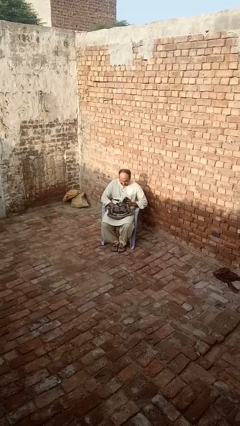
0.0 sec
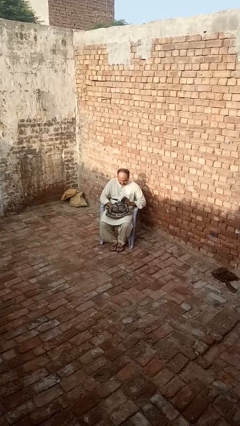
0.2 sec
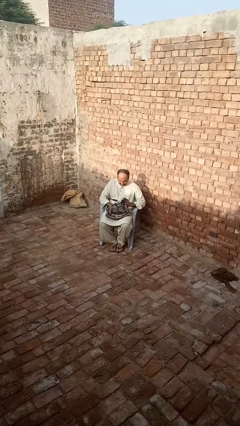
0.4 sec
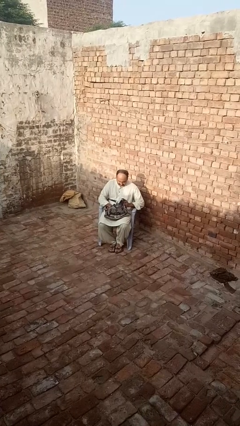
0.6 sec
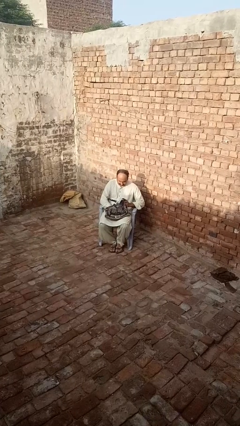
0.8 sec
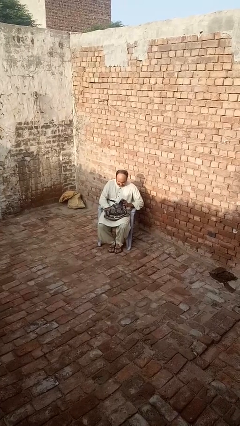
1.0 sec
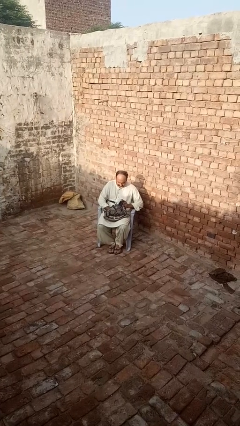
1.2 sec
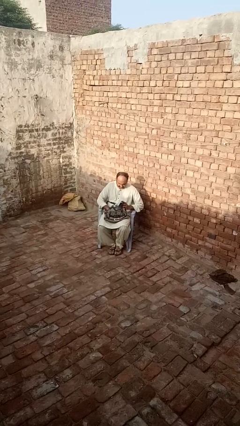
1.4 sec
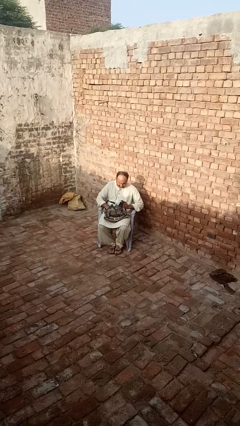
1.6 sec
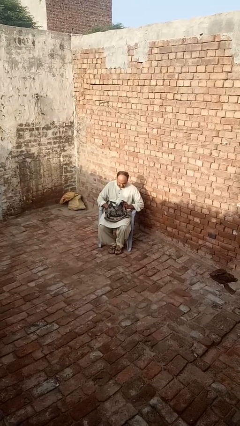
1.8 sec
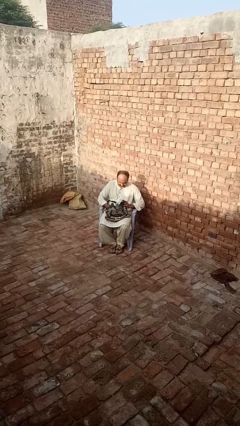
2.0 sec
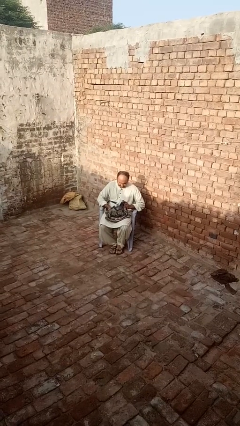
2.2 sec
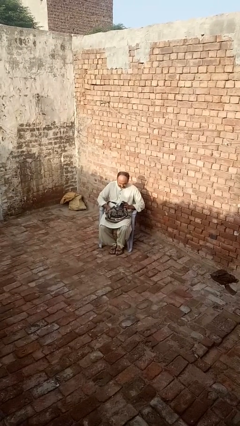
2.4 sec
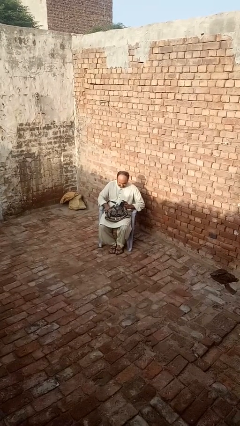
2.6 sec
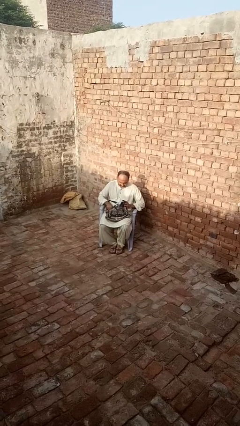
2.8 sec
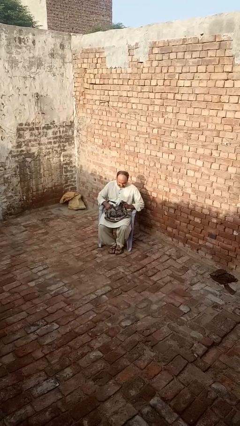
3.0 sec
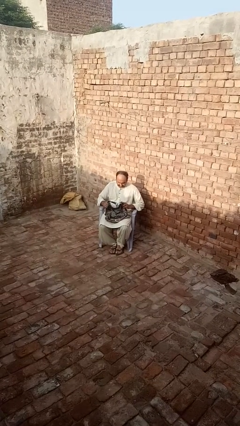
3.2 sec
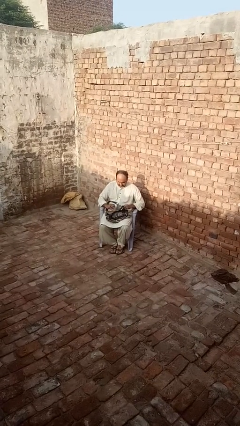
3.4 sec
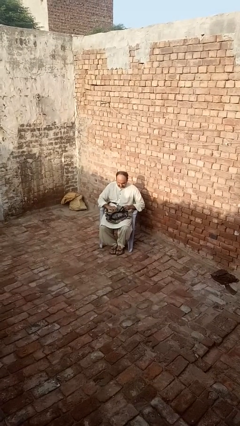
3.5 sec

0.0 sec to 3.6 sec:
person searches in purse

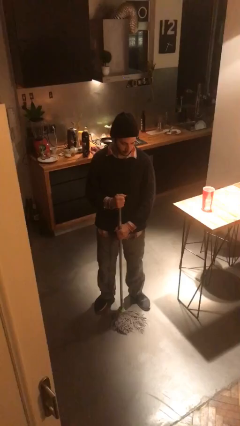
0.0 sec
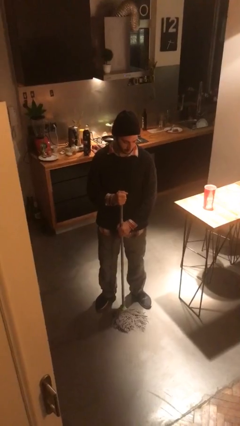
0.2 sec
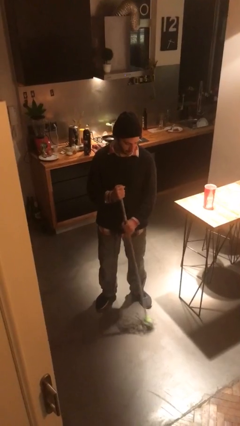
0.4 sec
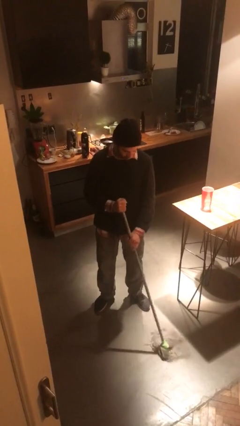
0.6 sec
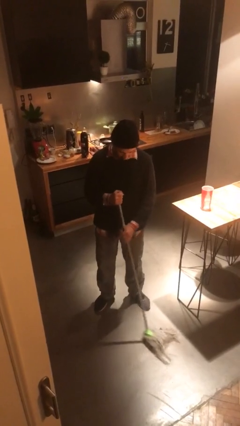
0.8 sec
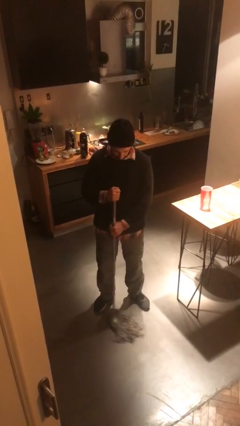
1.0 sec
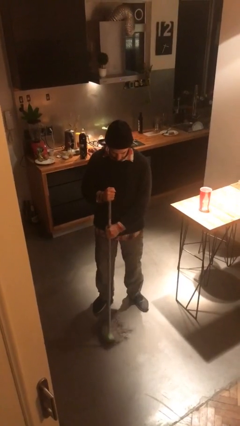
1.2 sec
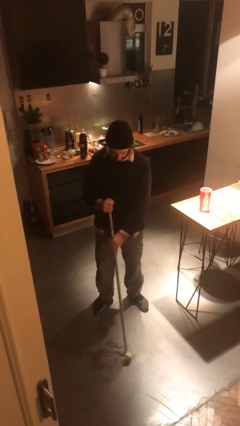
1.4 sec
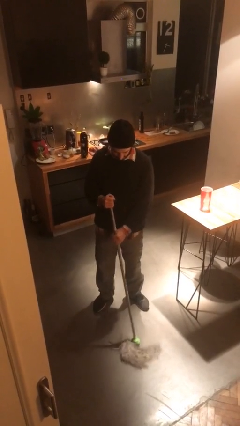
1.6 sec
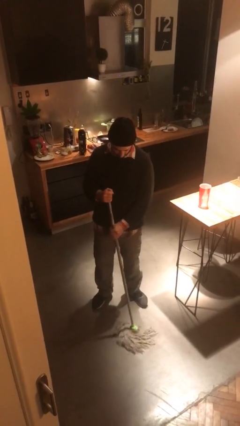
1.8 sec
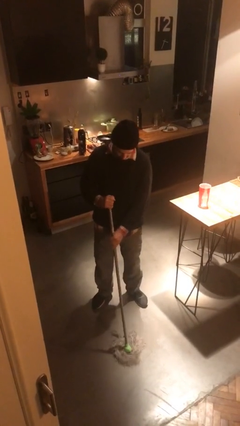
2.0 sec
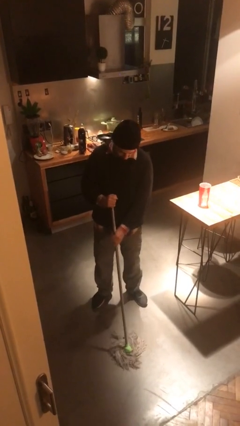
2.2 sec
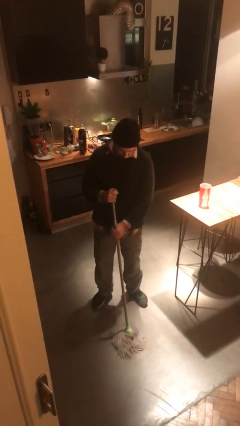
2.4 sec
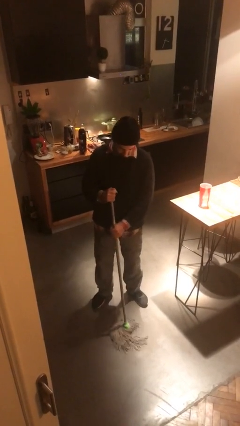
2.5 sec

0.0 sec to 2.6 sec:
person mops

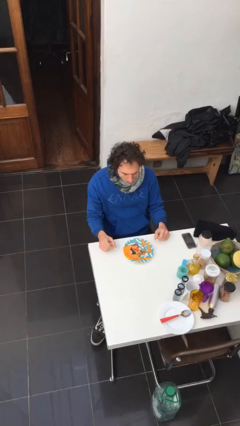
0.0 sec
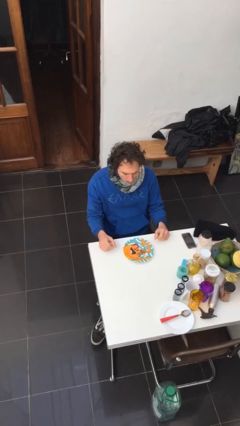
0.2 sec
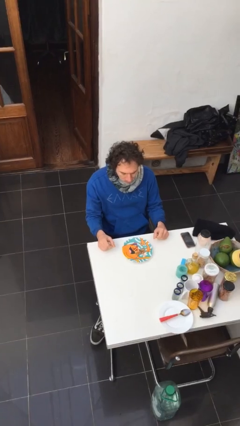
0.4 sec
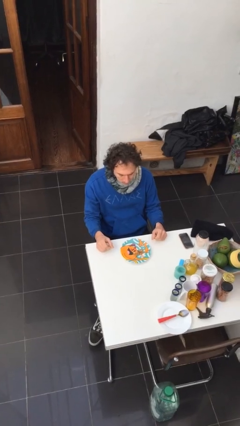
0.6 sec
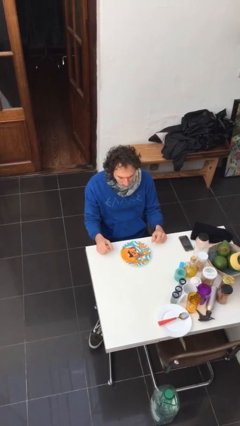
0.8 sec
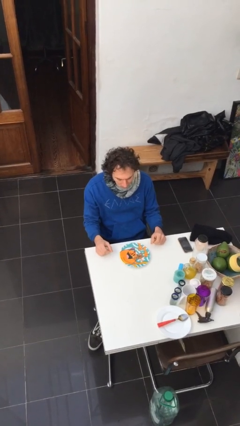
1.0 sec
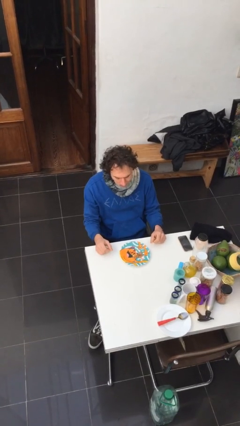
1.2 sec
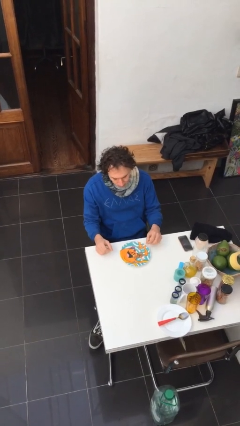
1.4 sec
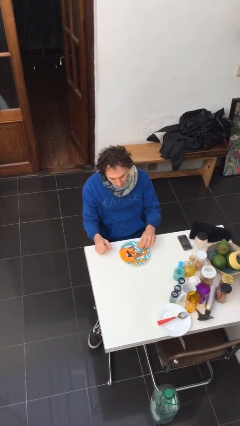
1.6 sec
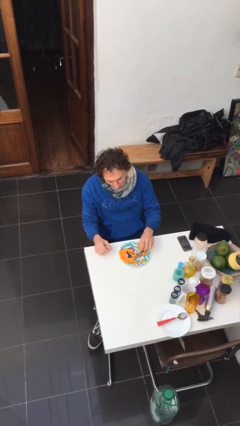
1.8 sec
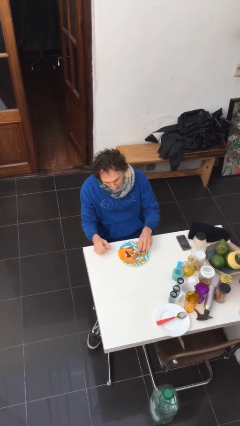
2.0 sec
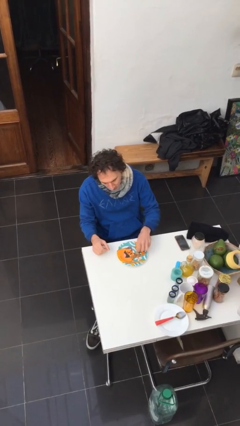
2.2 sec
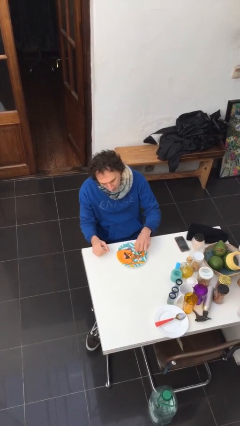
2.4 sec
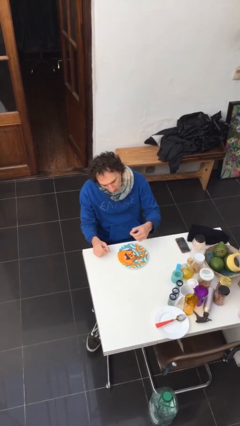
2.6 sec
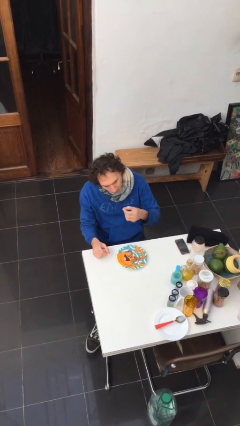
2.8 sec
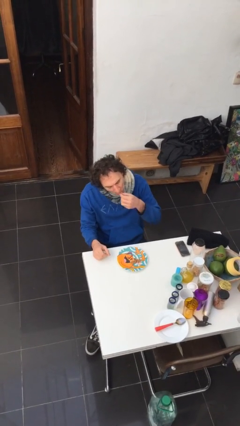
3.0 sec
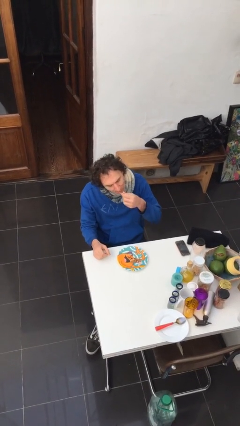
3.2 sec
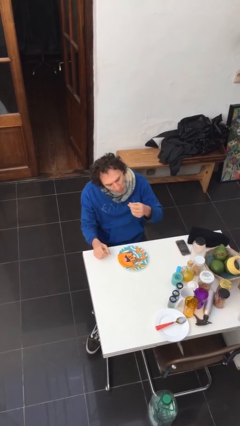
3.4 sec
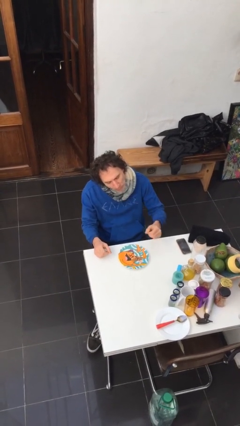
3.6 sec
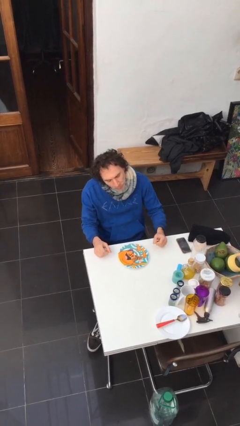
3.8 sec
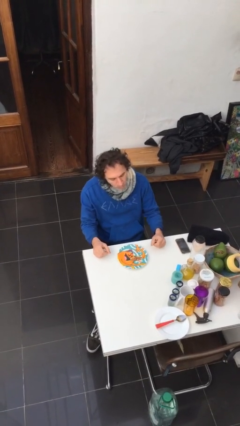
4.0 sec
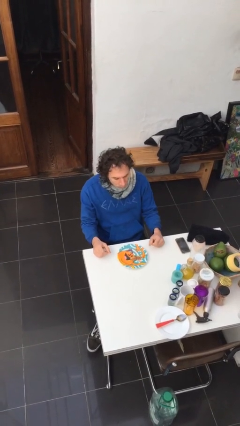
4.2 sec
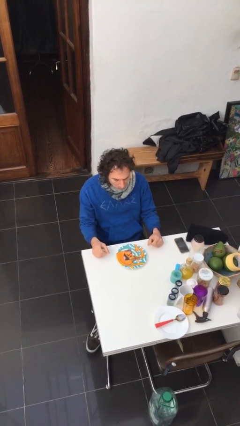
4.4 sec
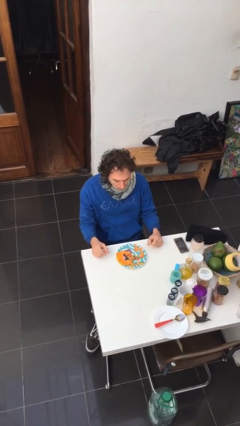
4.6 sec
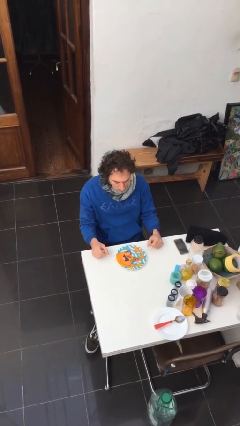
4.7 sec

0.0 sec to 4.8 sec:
person eats with hands

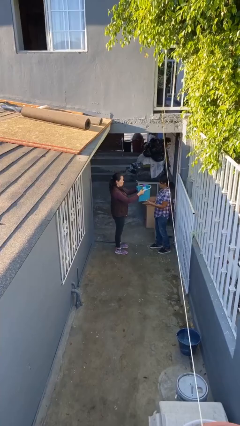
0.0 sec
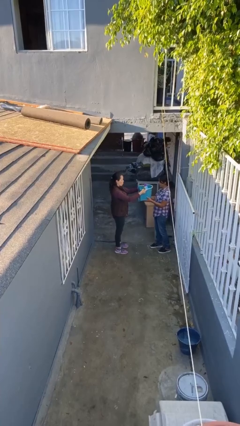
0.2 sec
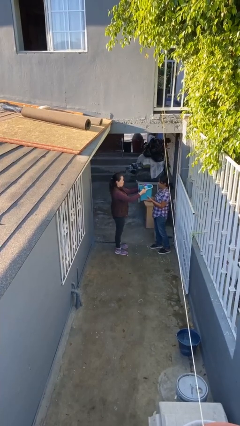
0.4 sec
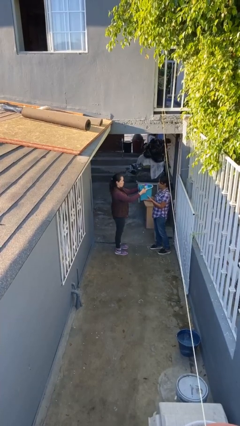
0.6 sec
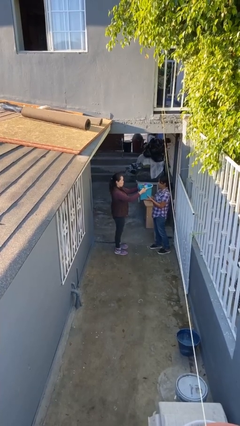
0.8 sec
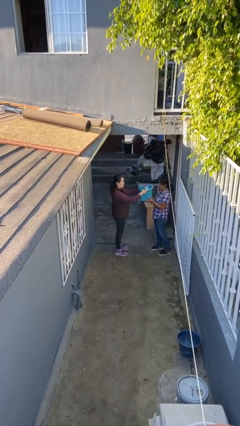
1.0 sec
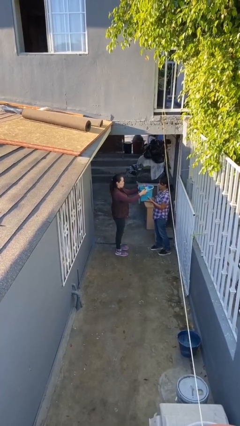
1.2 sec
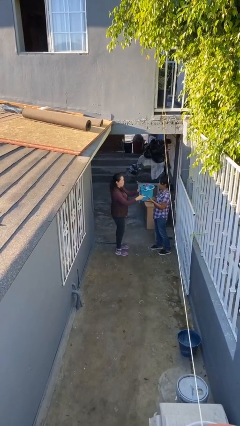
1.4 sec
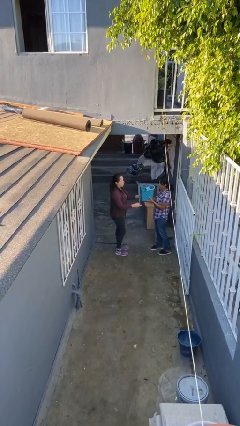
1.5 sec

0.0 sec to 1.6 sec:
person transfers object to person

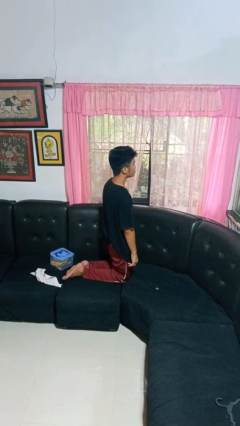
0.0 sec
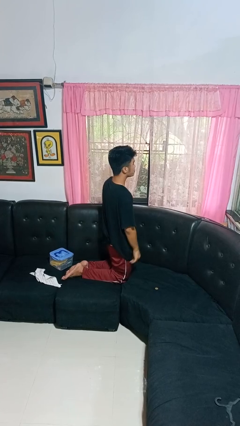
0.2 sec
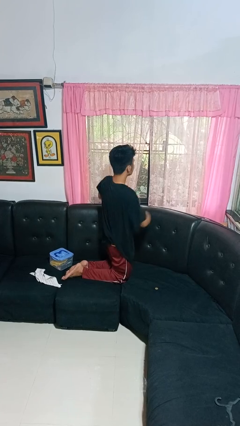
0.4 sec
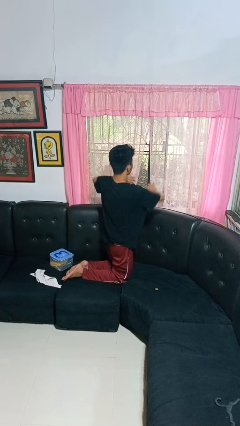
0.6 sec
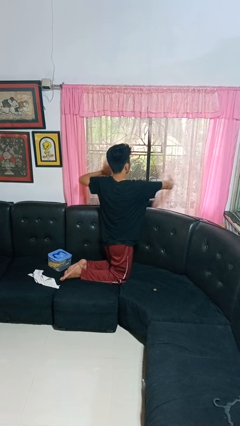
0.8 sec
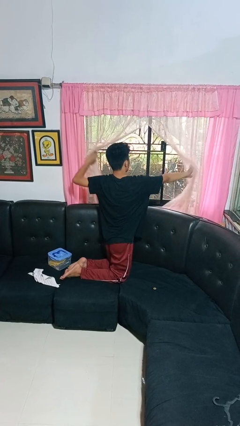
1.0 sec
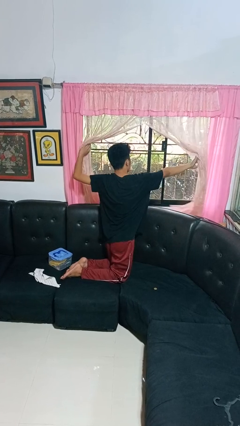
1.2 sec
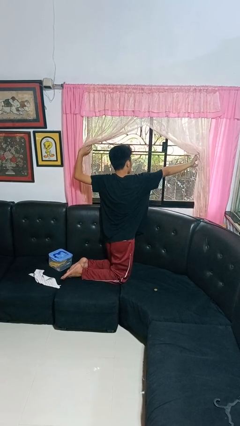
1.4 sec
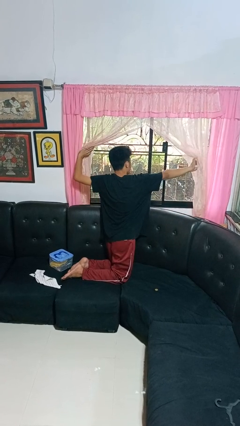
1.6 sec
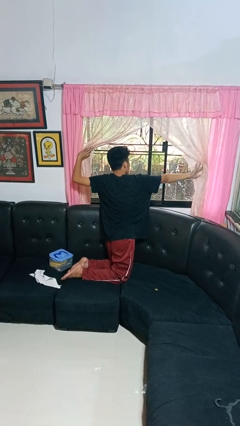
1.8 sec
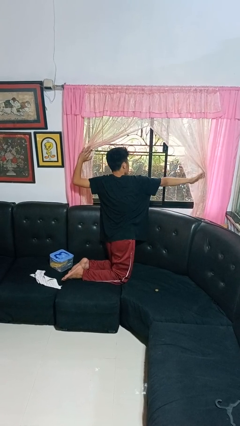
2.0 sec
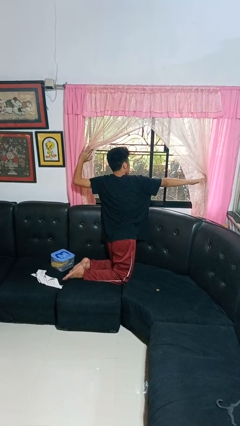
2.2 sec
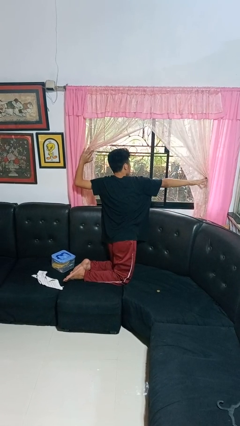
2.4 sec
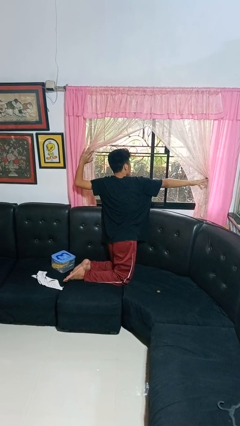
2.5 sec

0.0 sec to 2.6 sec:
person opens curtains

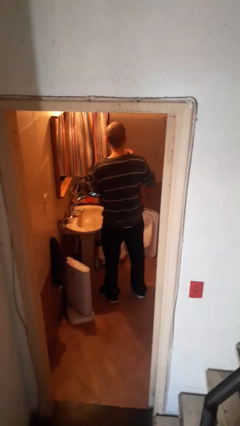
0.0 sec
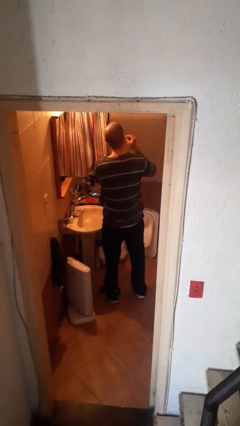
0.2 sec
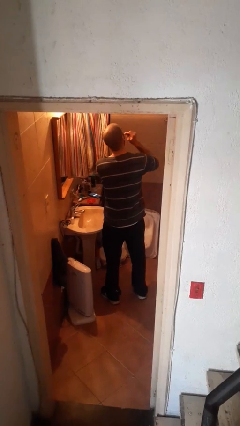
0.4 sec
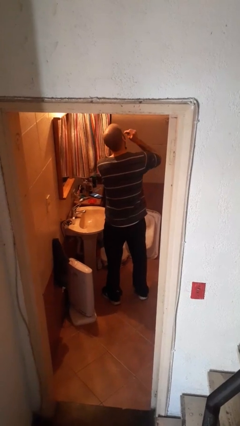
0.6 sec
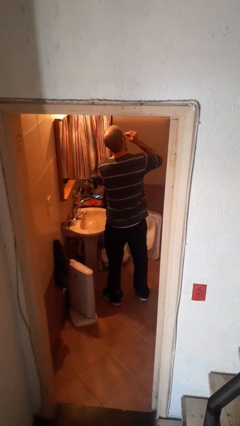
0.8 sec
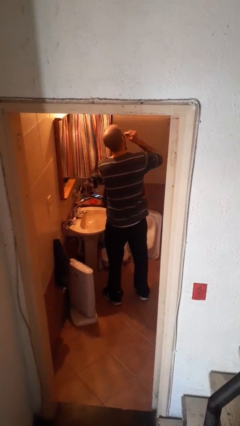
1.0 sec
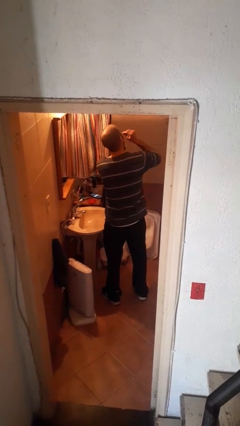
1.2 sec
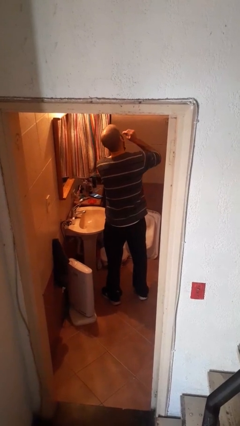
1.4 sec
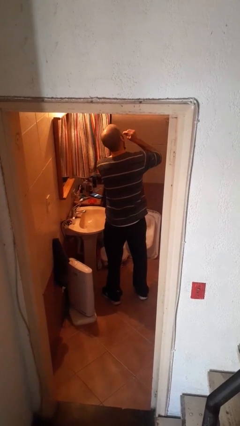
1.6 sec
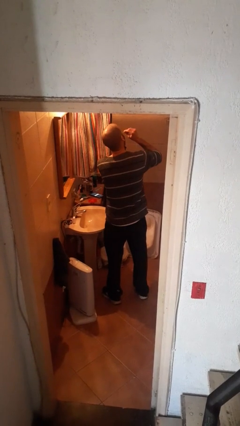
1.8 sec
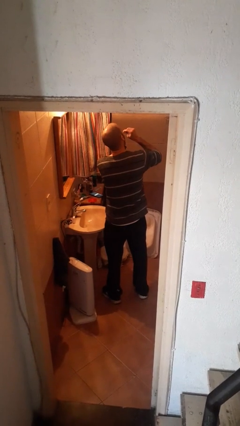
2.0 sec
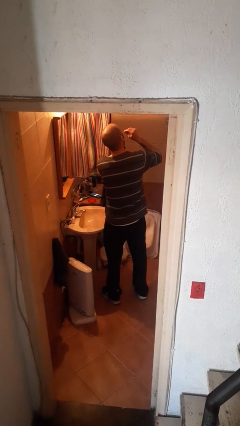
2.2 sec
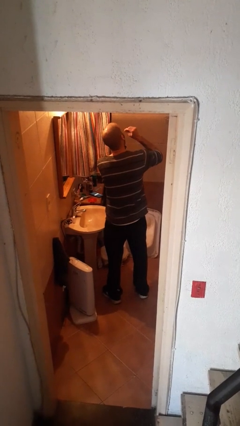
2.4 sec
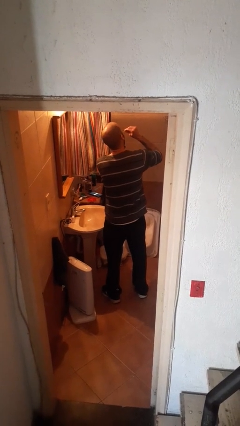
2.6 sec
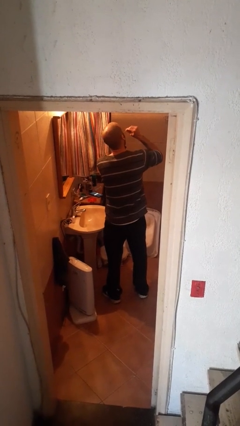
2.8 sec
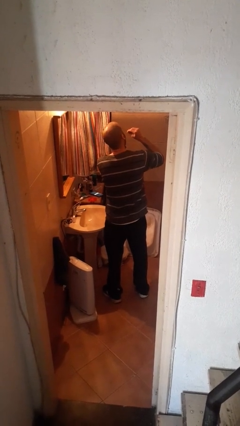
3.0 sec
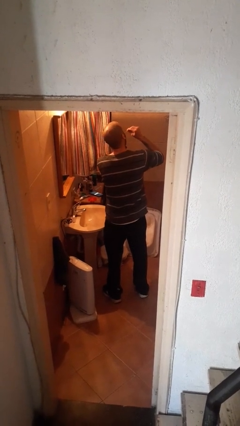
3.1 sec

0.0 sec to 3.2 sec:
person flosses
